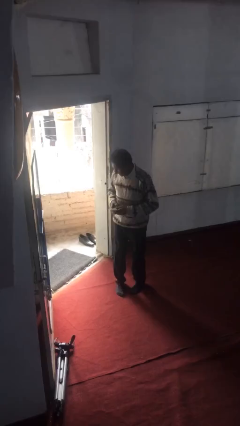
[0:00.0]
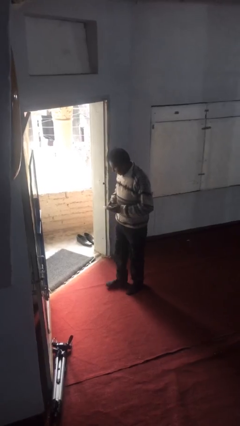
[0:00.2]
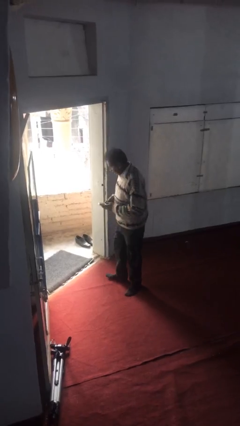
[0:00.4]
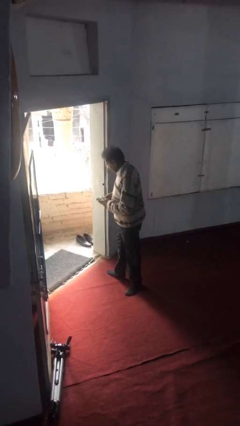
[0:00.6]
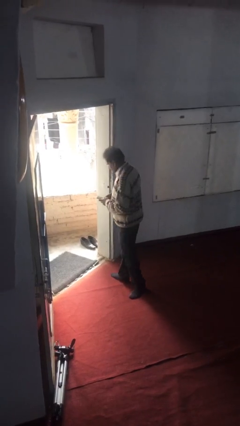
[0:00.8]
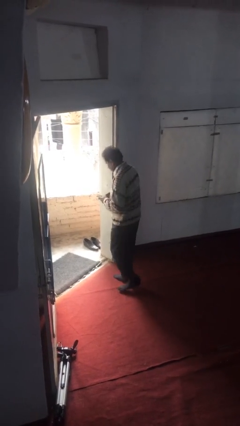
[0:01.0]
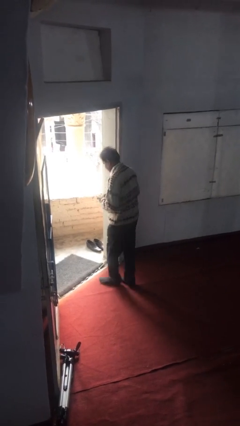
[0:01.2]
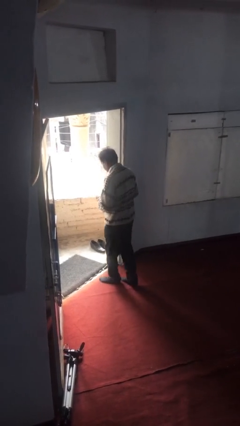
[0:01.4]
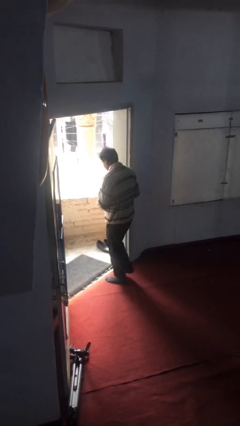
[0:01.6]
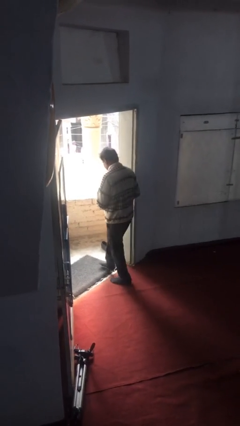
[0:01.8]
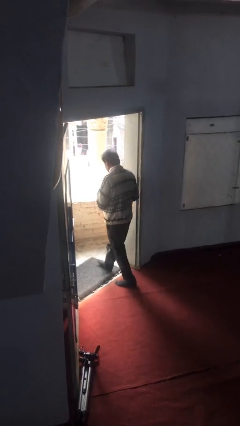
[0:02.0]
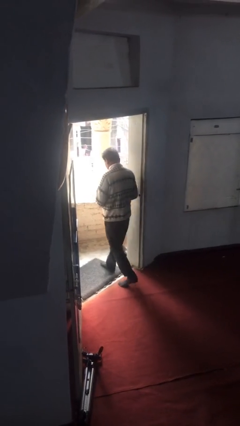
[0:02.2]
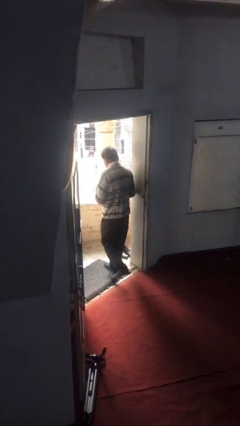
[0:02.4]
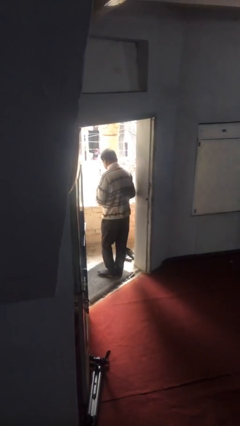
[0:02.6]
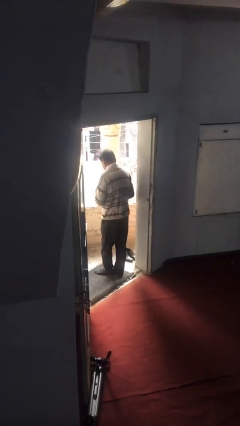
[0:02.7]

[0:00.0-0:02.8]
person exits scene through structure

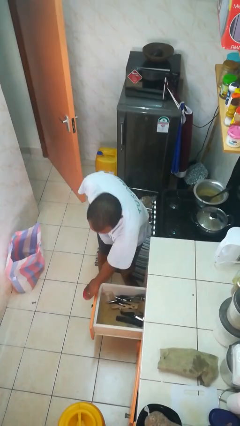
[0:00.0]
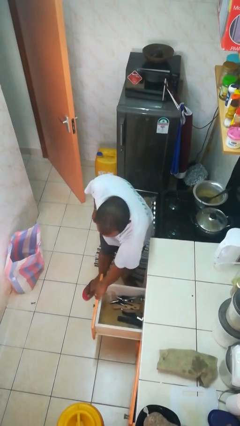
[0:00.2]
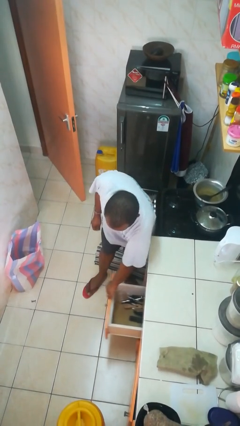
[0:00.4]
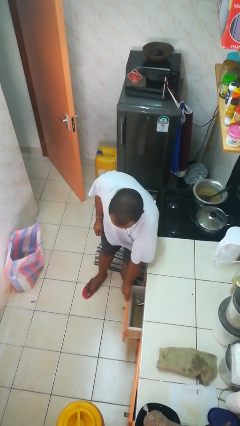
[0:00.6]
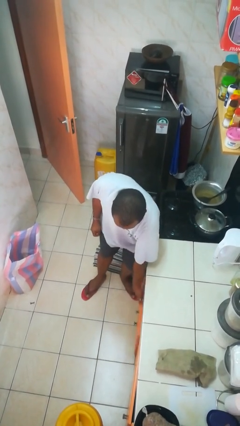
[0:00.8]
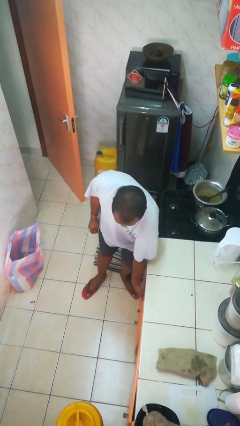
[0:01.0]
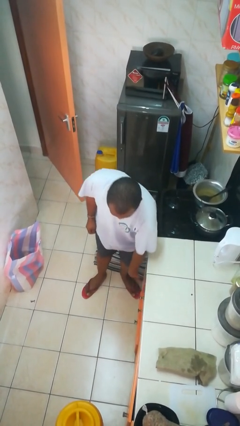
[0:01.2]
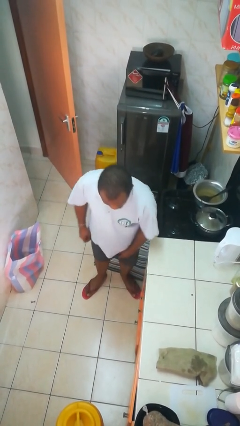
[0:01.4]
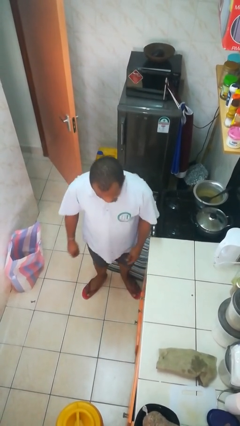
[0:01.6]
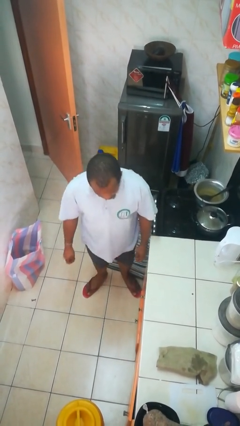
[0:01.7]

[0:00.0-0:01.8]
person closes kitchen drawer

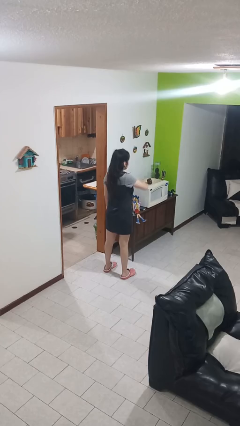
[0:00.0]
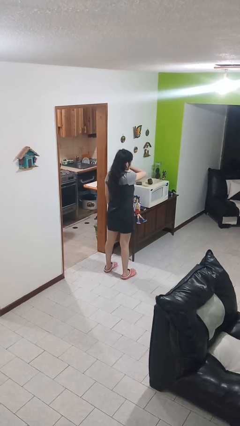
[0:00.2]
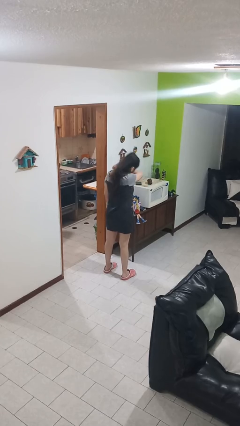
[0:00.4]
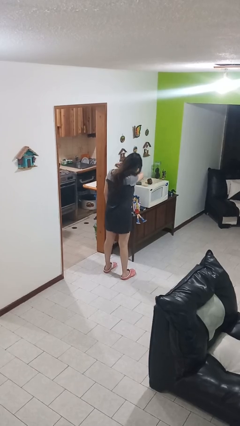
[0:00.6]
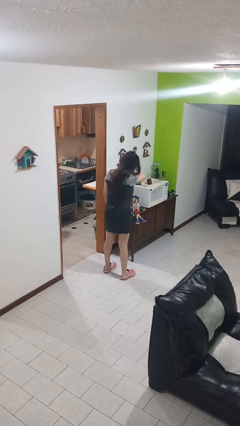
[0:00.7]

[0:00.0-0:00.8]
person sneezes into arm

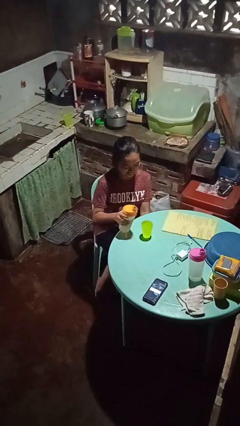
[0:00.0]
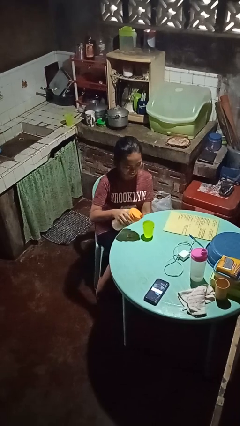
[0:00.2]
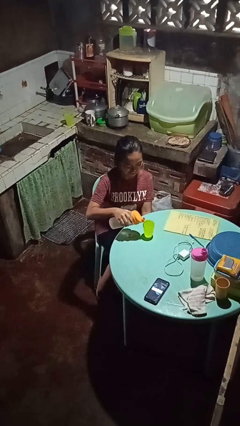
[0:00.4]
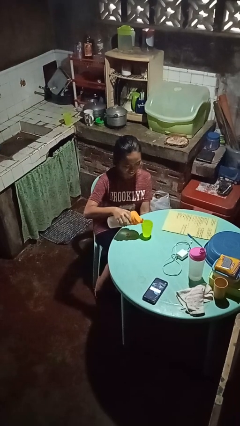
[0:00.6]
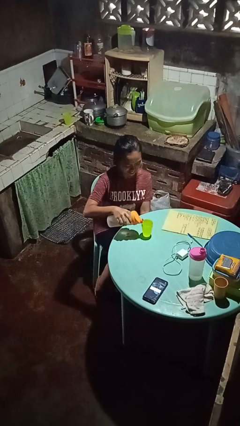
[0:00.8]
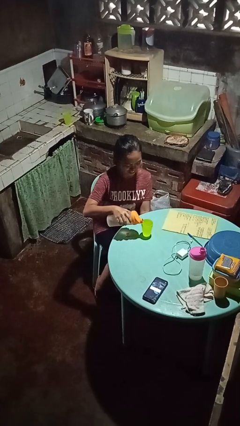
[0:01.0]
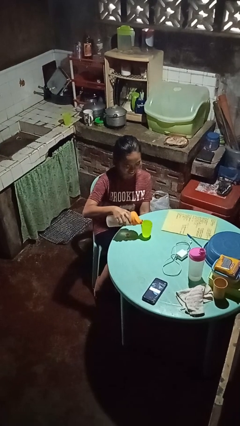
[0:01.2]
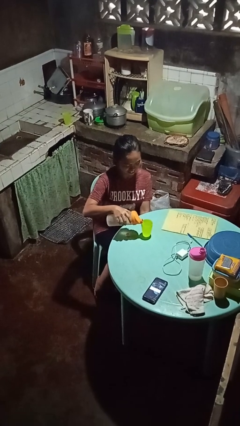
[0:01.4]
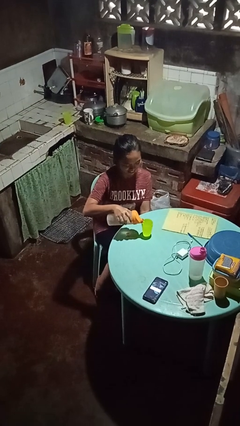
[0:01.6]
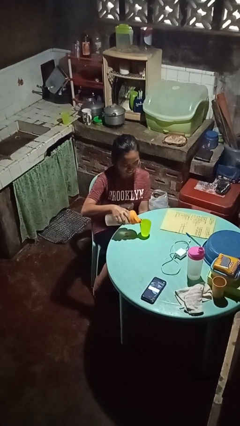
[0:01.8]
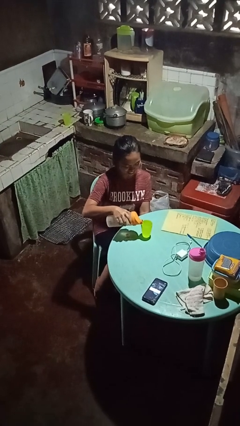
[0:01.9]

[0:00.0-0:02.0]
person pours liquid into cup

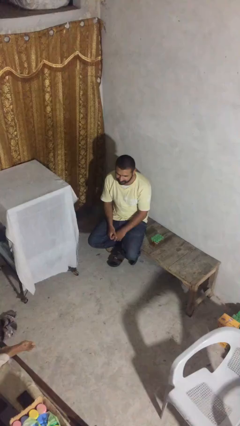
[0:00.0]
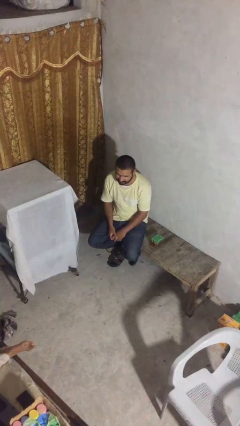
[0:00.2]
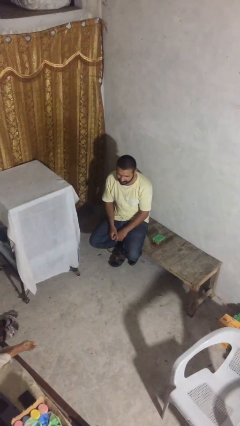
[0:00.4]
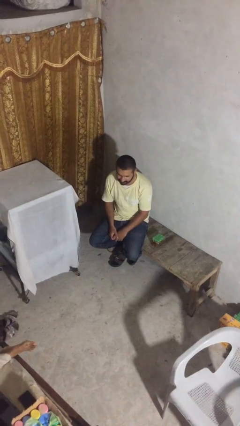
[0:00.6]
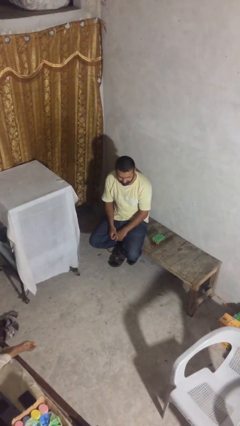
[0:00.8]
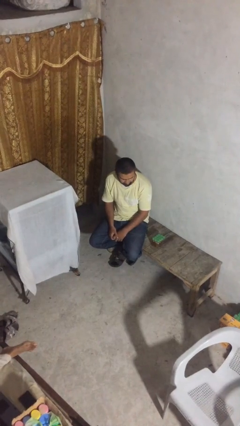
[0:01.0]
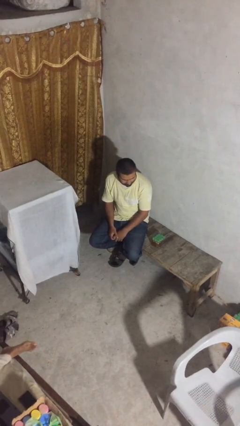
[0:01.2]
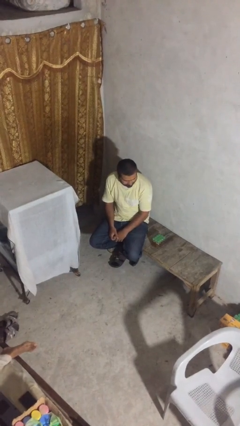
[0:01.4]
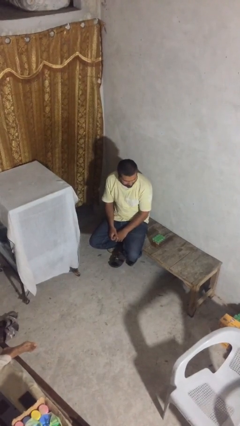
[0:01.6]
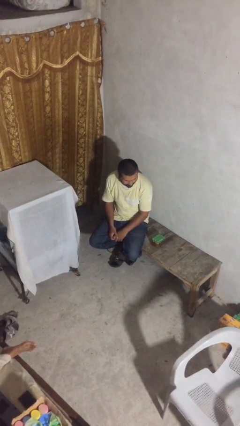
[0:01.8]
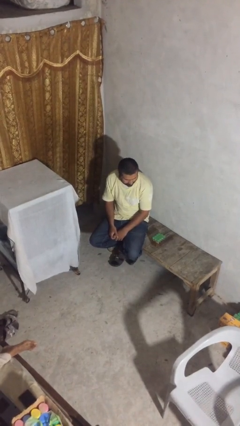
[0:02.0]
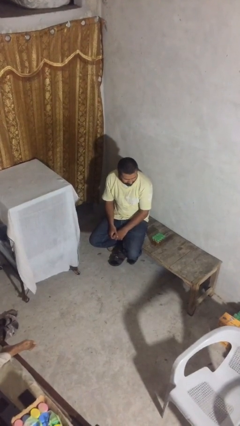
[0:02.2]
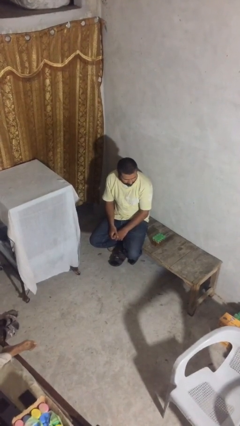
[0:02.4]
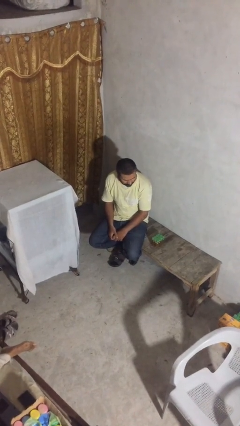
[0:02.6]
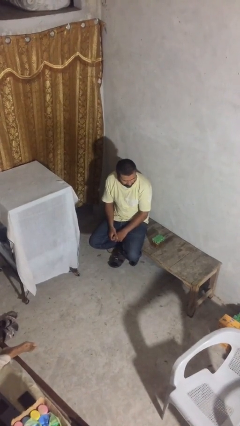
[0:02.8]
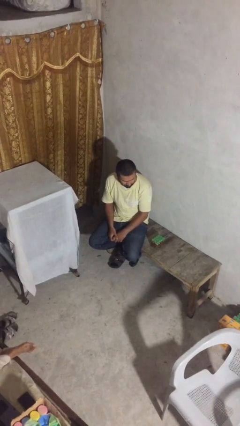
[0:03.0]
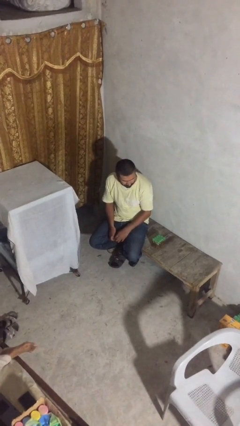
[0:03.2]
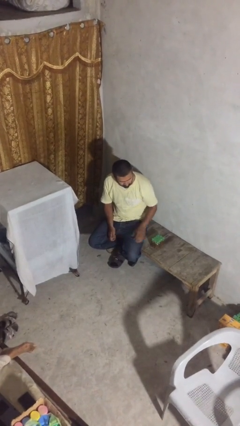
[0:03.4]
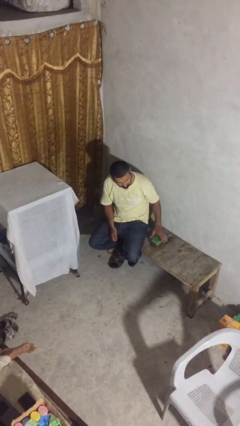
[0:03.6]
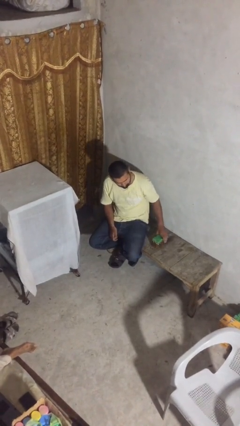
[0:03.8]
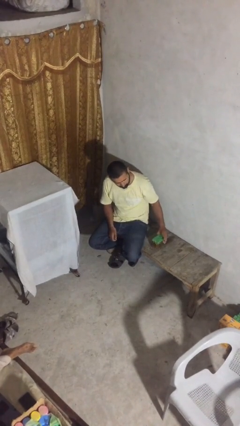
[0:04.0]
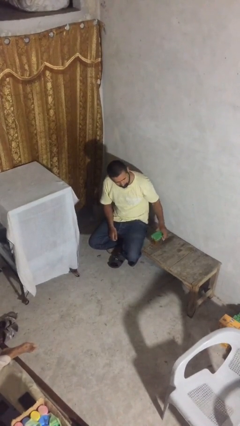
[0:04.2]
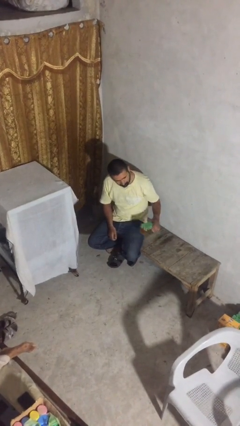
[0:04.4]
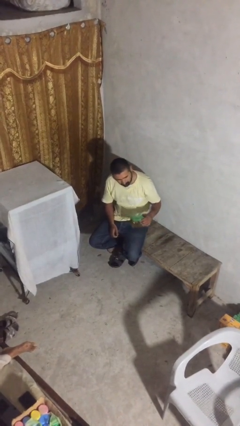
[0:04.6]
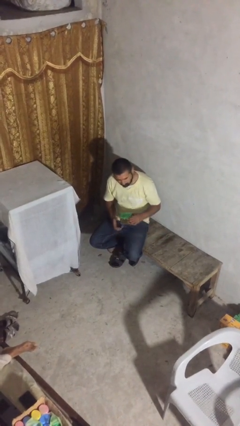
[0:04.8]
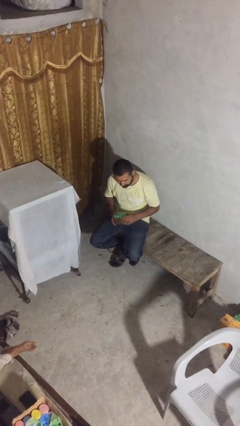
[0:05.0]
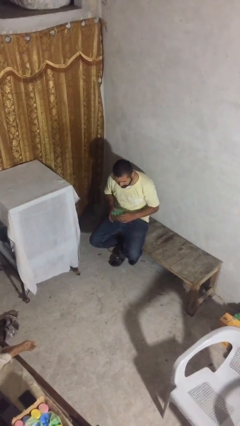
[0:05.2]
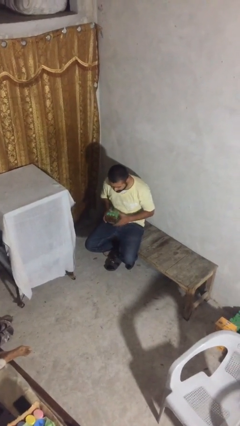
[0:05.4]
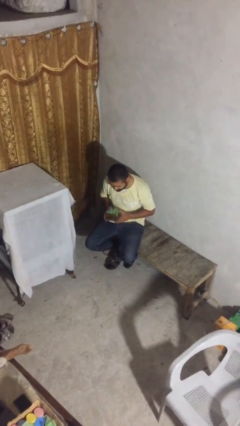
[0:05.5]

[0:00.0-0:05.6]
person picks up object from table

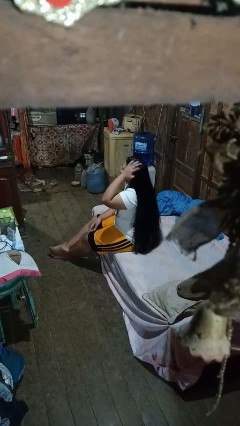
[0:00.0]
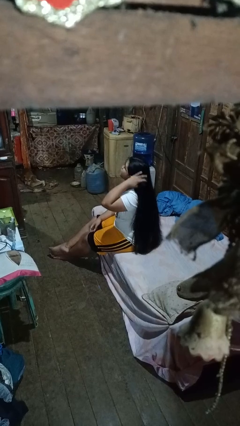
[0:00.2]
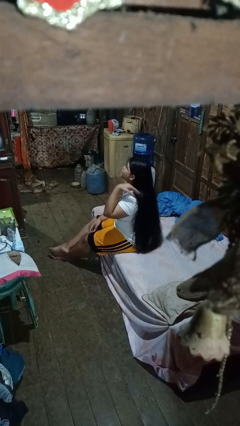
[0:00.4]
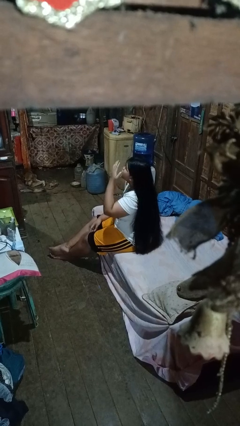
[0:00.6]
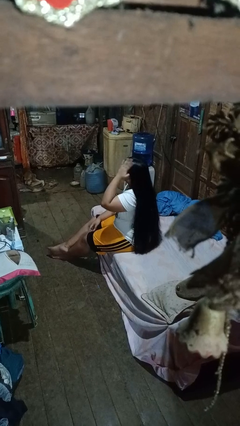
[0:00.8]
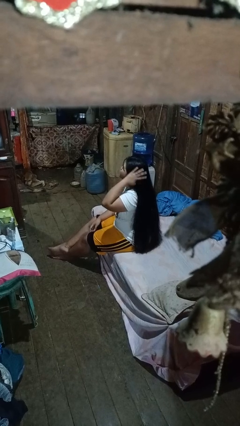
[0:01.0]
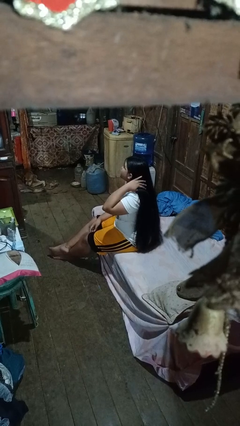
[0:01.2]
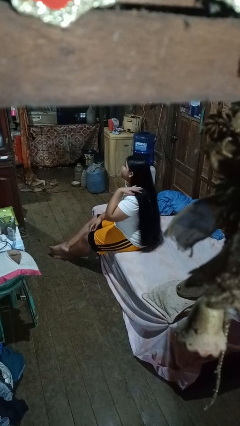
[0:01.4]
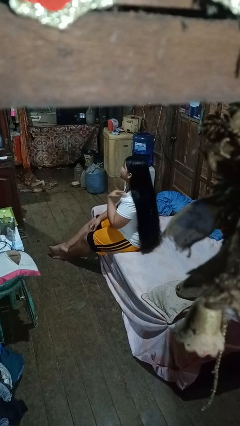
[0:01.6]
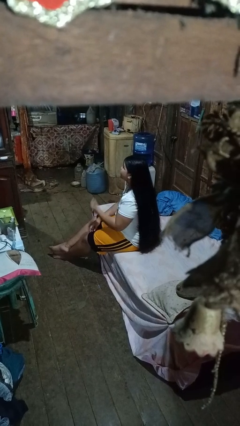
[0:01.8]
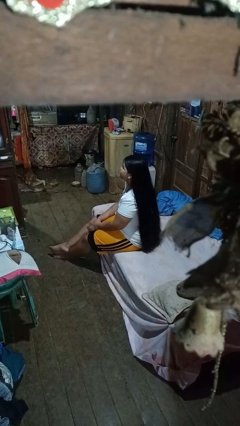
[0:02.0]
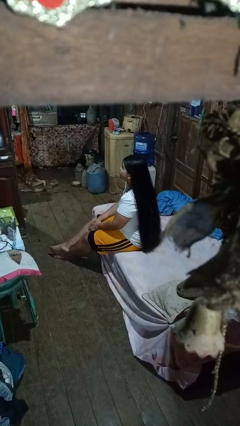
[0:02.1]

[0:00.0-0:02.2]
person strokes hair

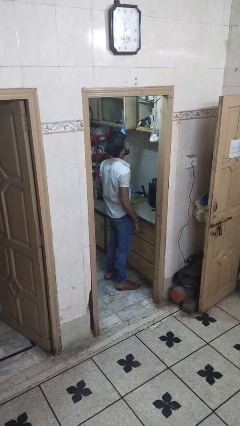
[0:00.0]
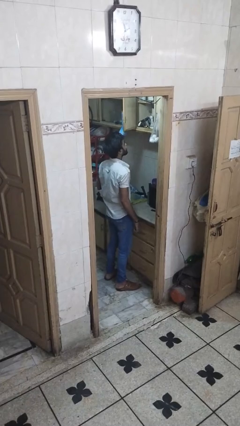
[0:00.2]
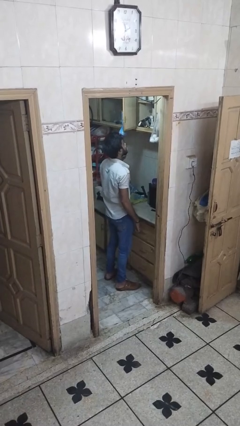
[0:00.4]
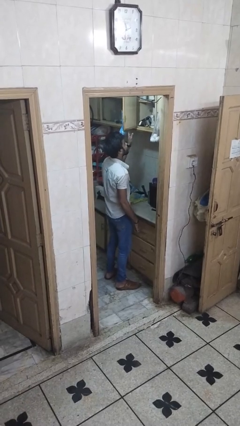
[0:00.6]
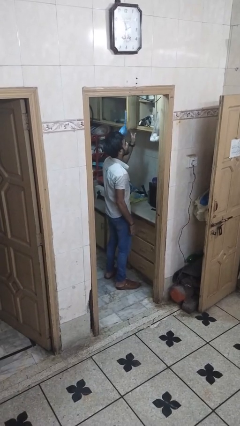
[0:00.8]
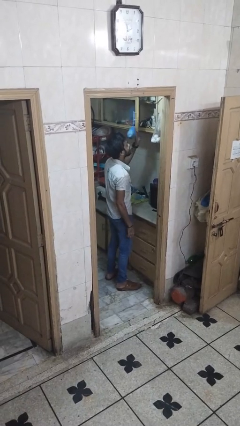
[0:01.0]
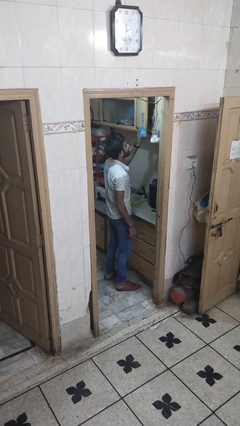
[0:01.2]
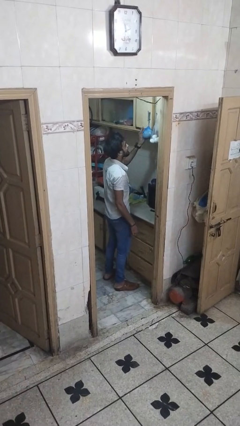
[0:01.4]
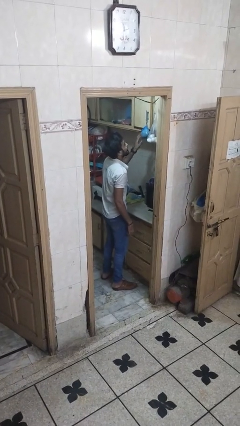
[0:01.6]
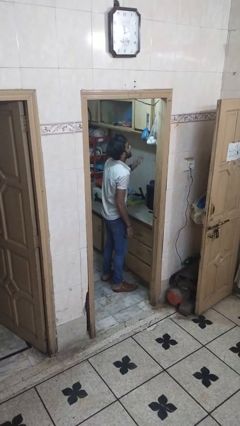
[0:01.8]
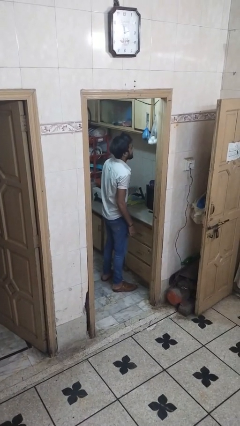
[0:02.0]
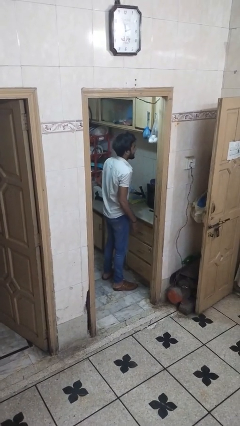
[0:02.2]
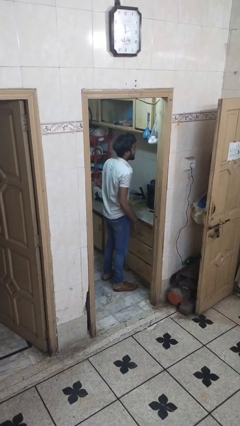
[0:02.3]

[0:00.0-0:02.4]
person closes cabinet
